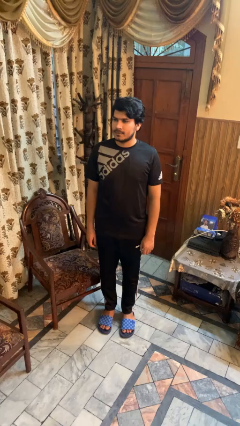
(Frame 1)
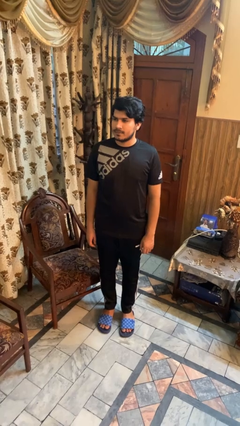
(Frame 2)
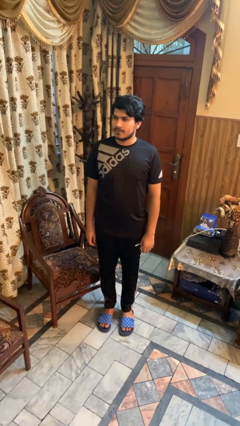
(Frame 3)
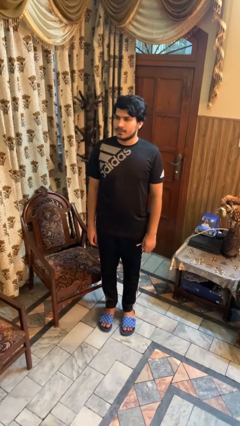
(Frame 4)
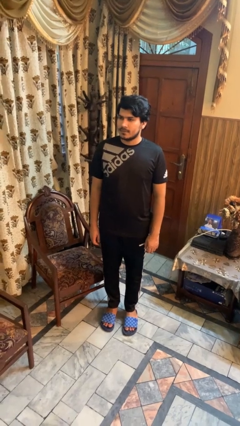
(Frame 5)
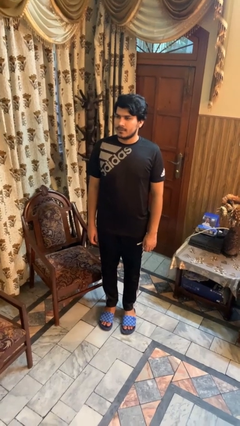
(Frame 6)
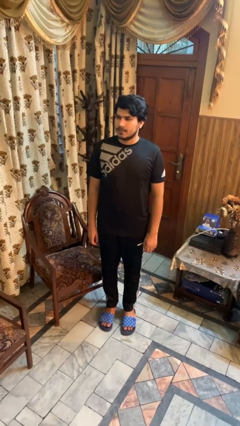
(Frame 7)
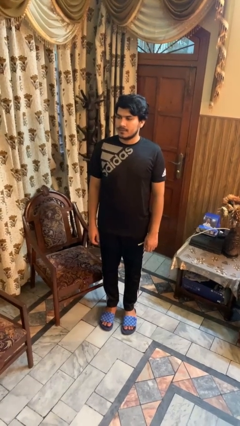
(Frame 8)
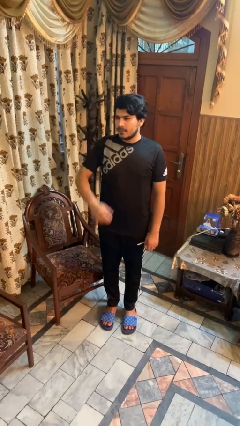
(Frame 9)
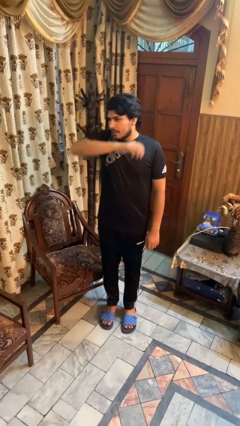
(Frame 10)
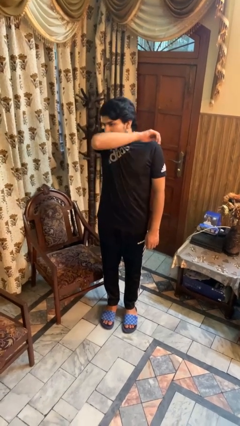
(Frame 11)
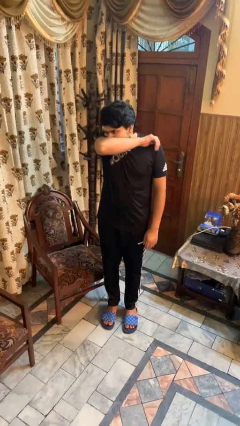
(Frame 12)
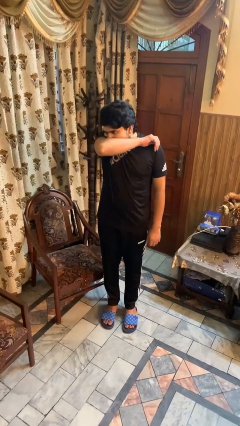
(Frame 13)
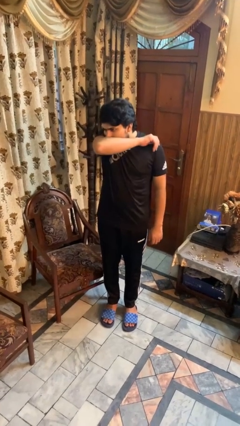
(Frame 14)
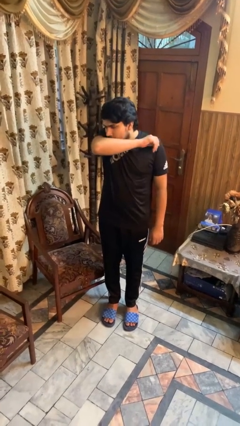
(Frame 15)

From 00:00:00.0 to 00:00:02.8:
person sneezes into arm

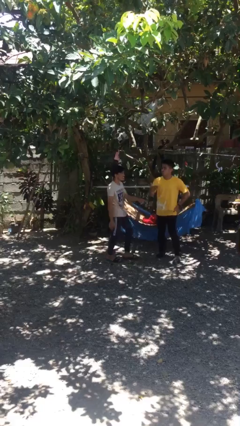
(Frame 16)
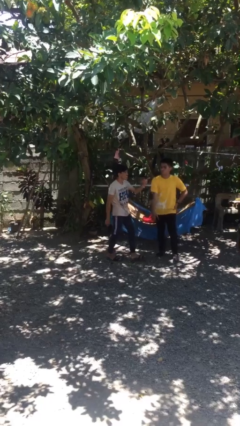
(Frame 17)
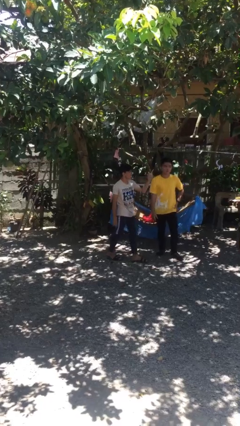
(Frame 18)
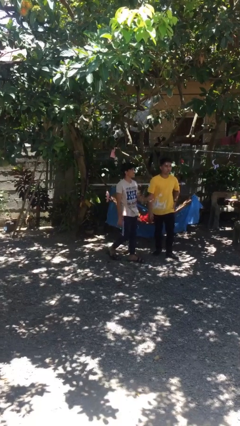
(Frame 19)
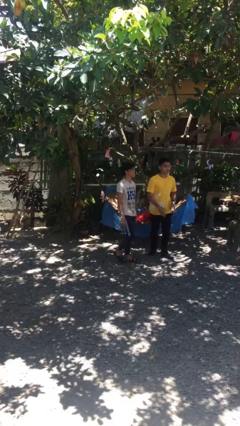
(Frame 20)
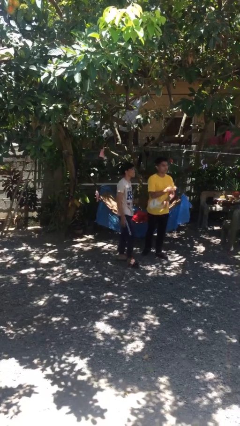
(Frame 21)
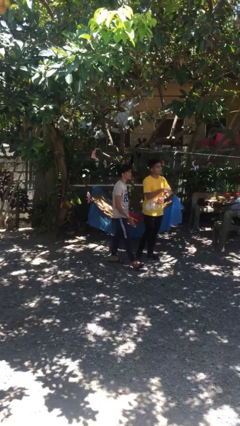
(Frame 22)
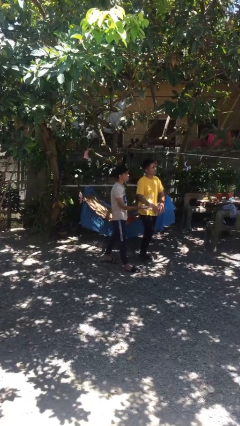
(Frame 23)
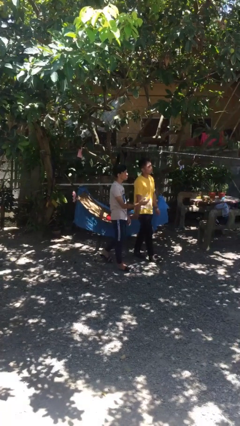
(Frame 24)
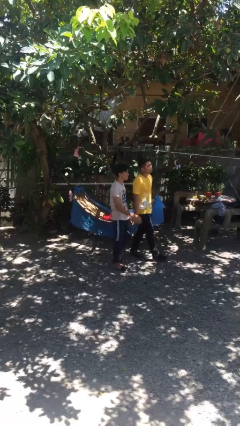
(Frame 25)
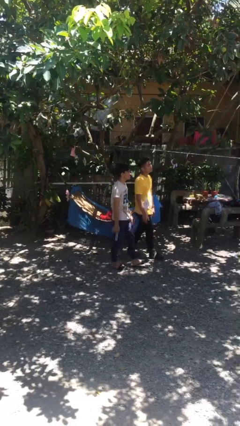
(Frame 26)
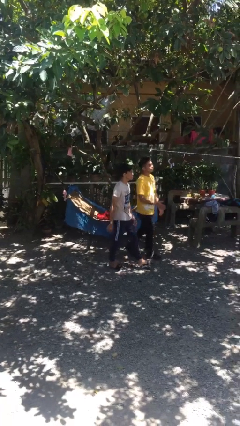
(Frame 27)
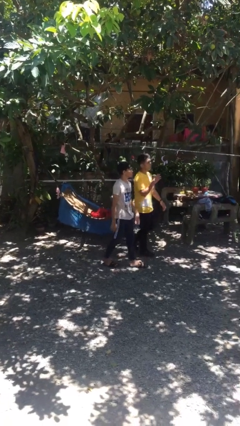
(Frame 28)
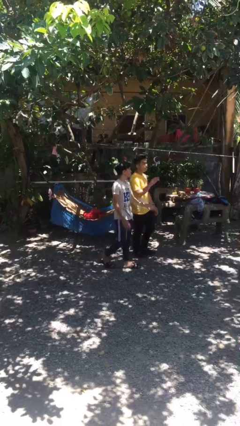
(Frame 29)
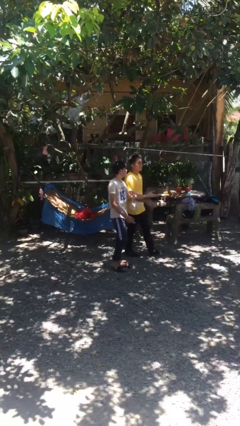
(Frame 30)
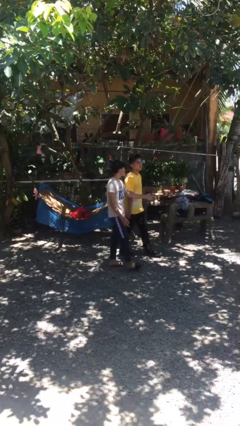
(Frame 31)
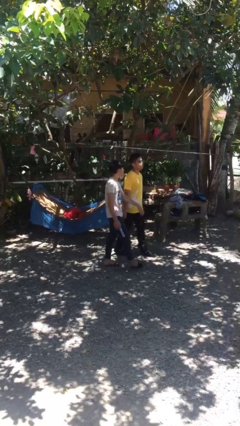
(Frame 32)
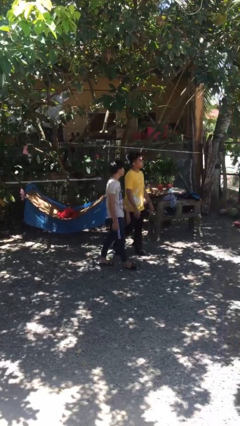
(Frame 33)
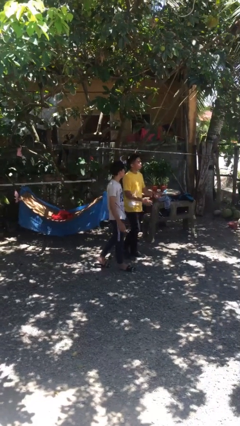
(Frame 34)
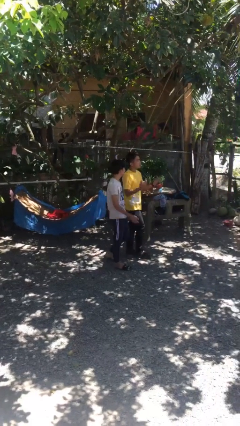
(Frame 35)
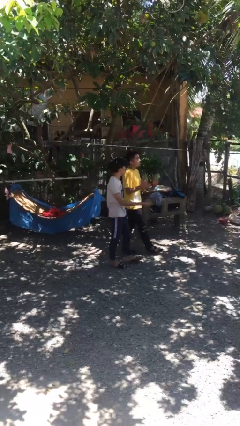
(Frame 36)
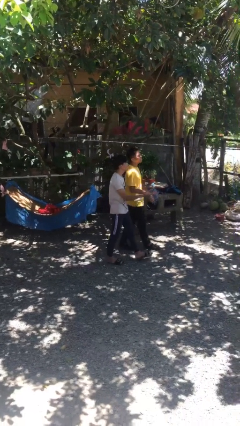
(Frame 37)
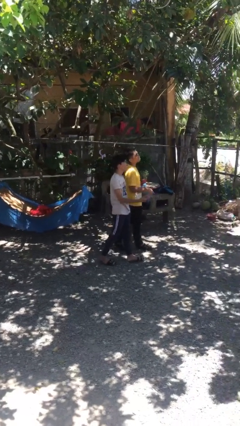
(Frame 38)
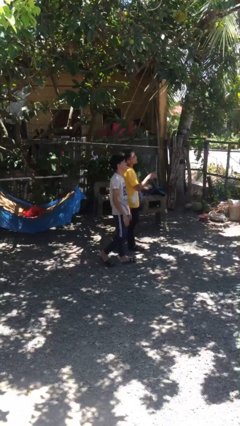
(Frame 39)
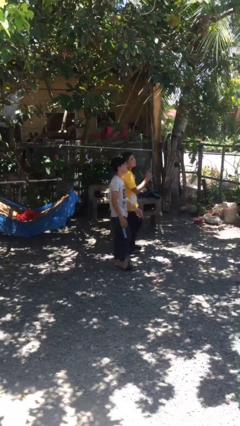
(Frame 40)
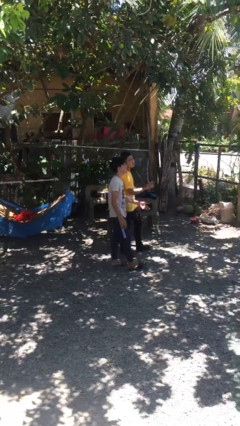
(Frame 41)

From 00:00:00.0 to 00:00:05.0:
person talks to person

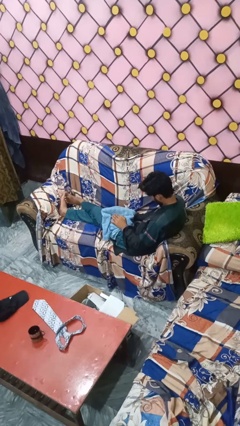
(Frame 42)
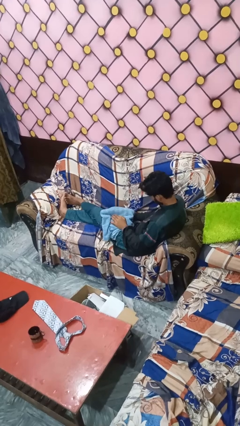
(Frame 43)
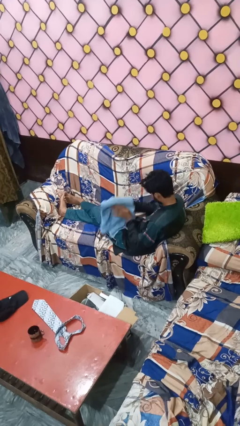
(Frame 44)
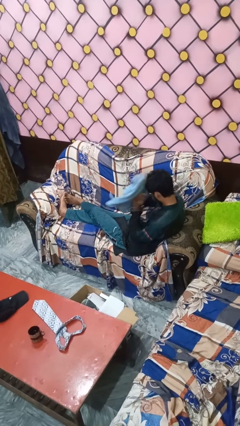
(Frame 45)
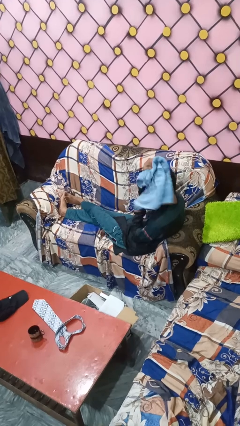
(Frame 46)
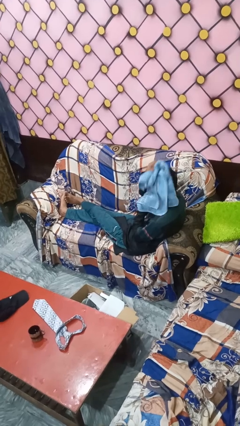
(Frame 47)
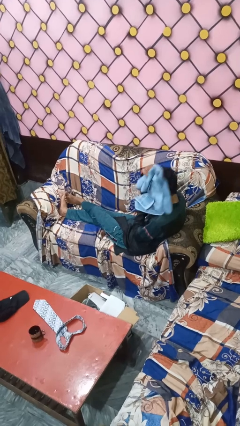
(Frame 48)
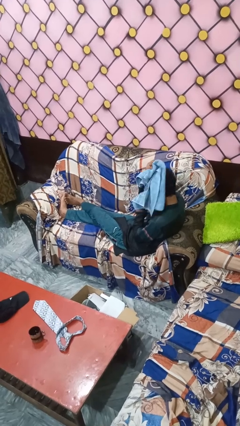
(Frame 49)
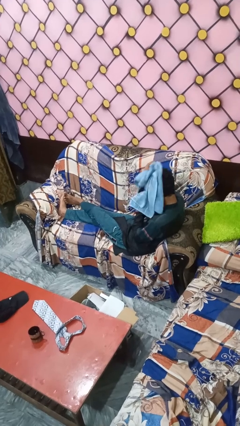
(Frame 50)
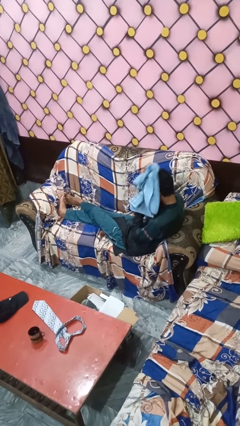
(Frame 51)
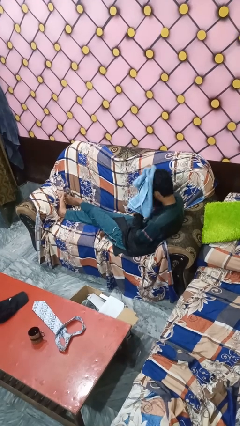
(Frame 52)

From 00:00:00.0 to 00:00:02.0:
person dries hair with towel

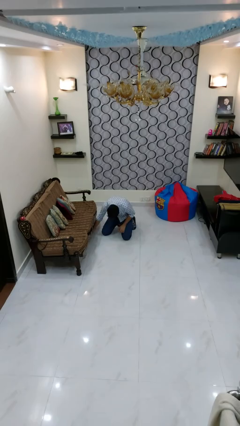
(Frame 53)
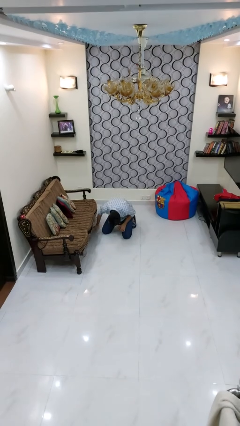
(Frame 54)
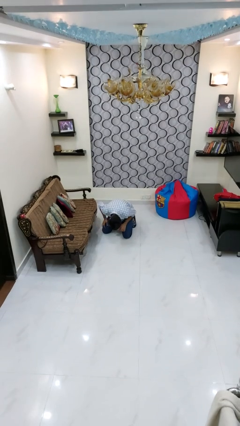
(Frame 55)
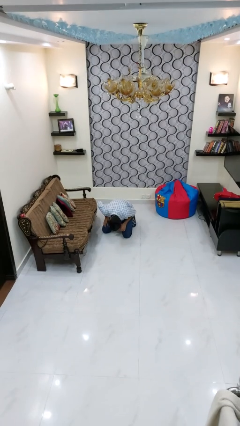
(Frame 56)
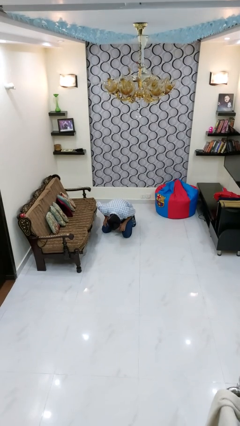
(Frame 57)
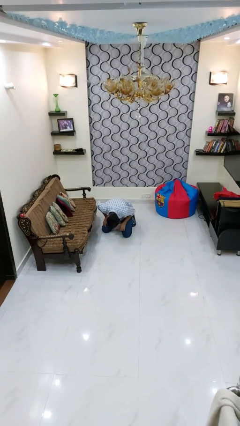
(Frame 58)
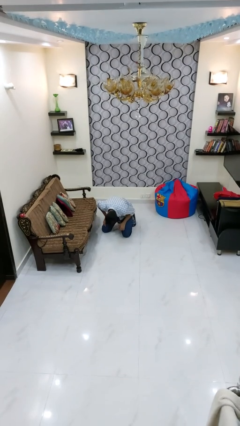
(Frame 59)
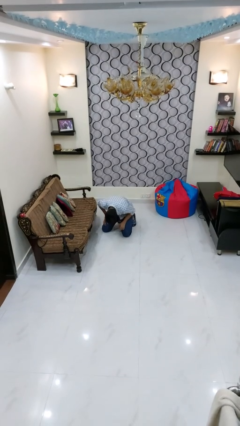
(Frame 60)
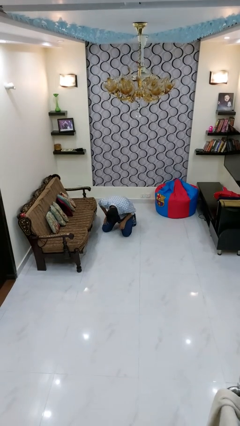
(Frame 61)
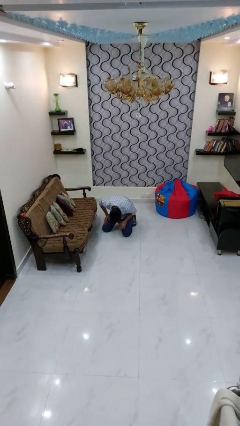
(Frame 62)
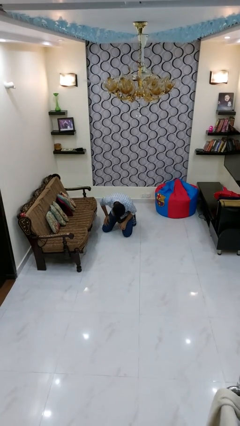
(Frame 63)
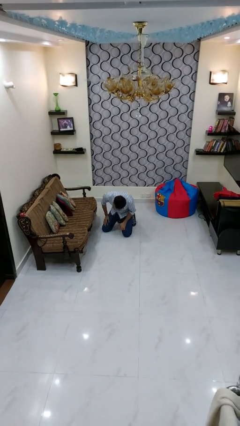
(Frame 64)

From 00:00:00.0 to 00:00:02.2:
person searches under couch

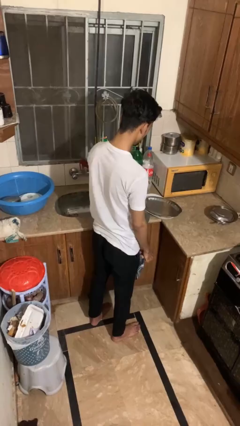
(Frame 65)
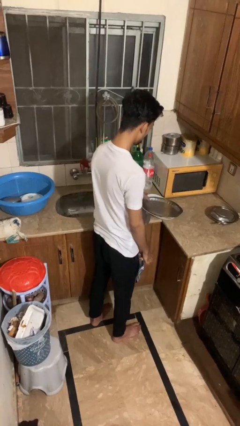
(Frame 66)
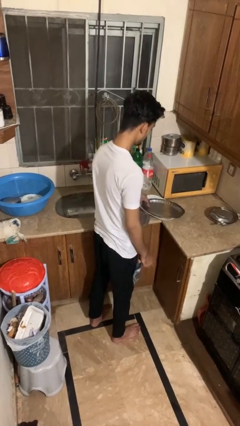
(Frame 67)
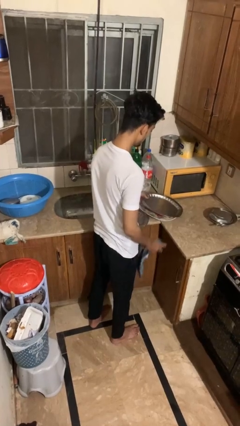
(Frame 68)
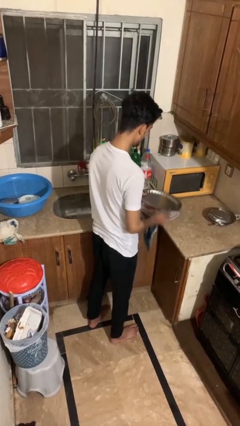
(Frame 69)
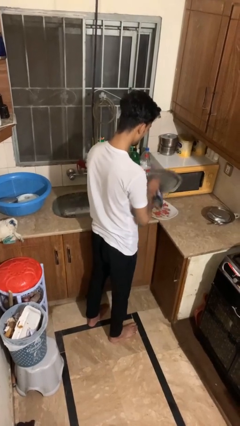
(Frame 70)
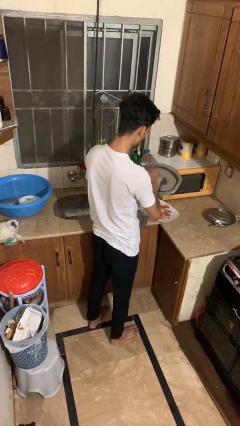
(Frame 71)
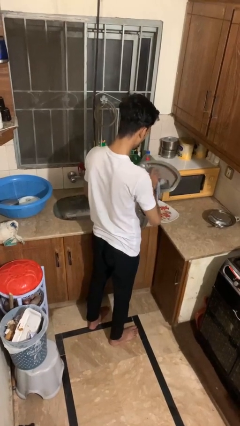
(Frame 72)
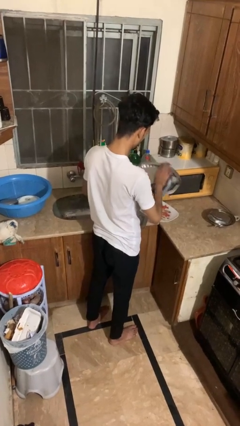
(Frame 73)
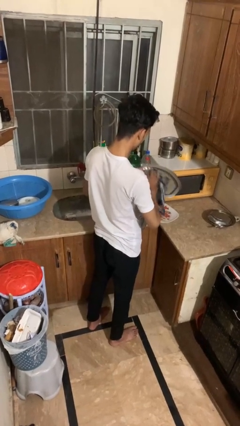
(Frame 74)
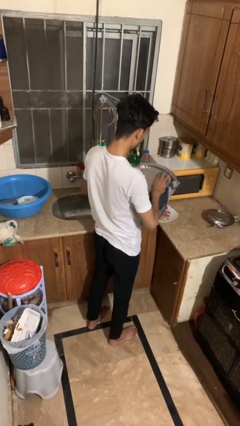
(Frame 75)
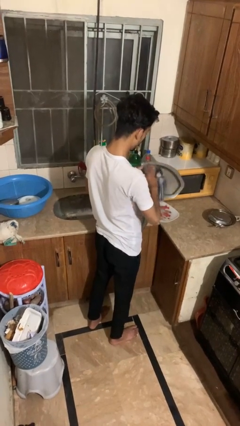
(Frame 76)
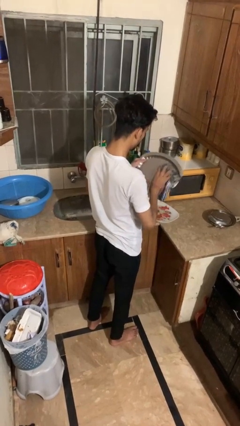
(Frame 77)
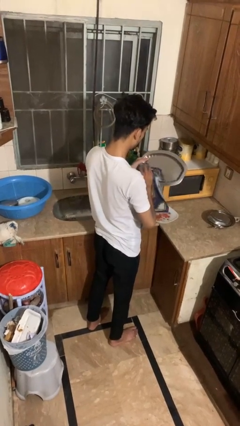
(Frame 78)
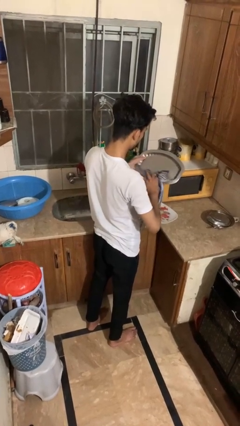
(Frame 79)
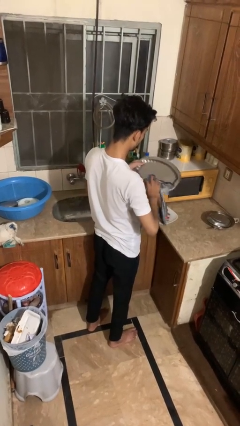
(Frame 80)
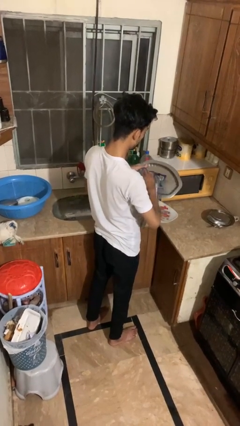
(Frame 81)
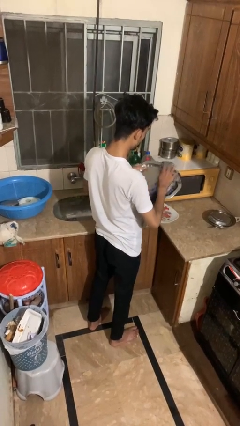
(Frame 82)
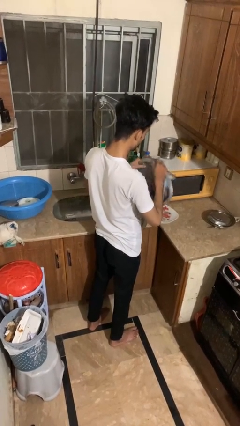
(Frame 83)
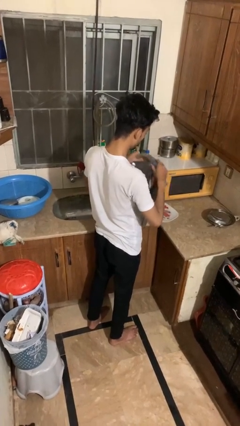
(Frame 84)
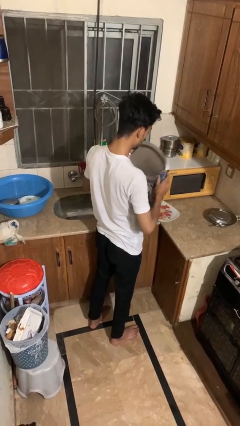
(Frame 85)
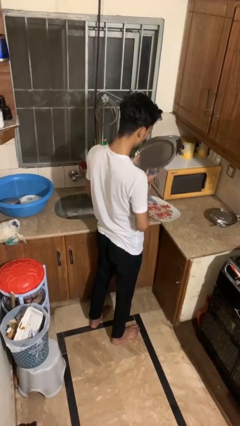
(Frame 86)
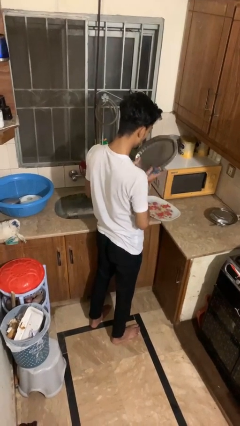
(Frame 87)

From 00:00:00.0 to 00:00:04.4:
person dries dish

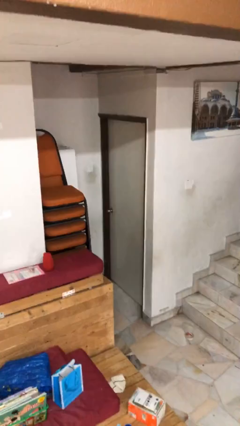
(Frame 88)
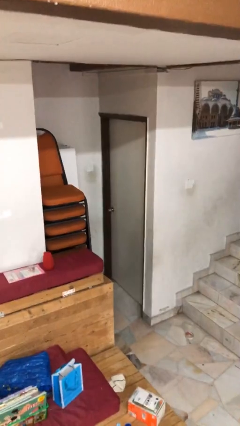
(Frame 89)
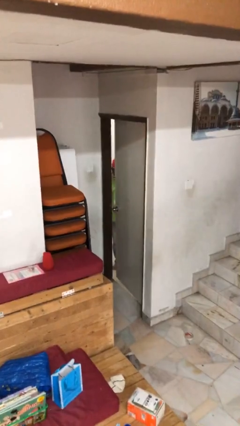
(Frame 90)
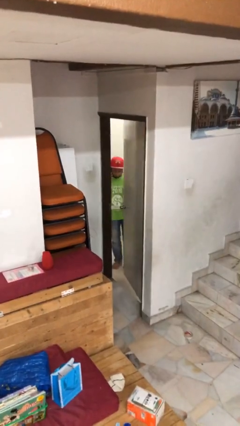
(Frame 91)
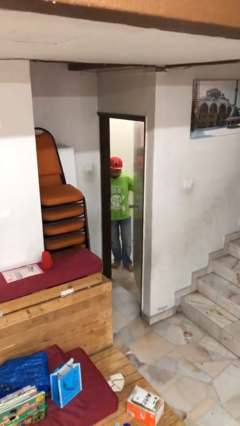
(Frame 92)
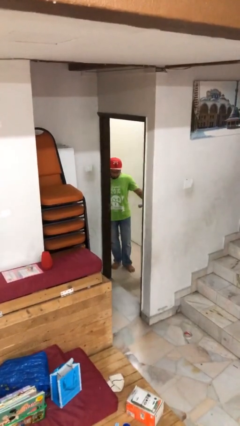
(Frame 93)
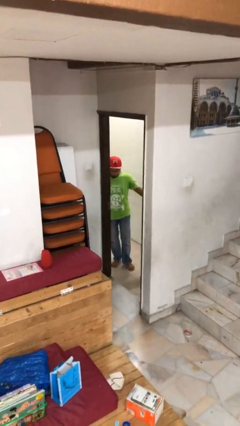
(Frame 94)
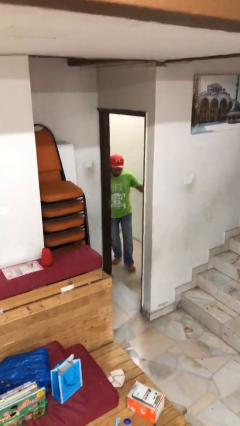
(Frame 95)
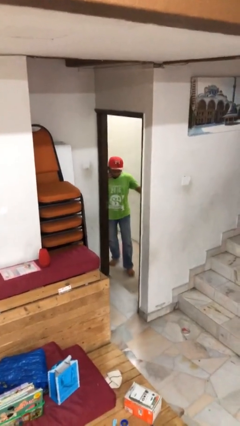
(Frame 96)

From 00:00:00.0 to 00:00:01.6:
person opens facility door
